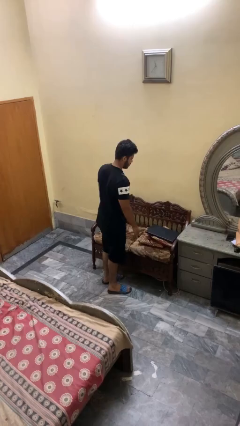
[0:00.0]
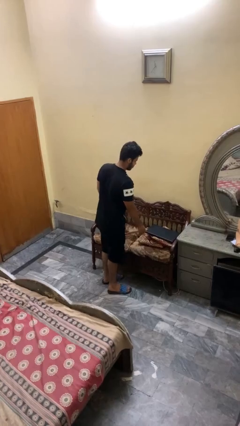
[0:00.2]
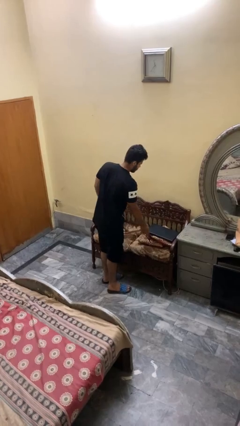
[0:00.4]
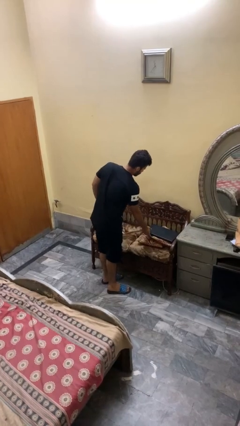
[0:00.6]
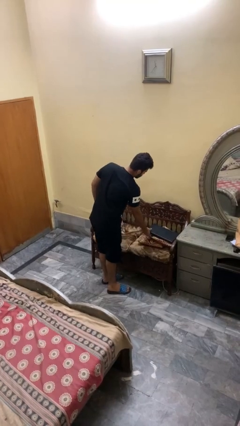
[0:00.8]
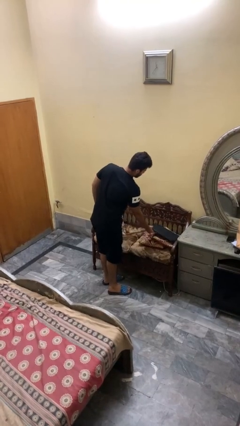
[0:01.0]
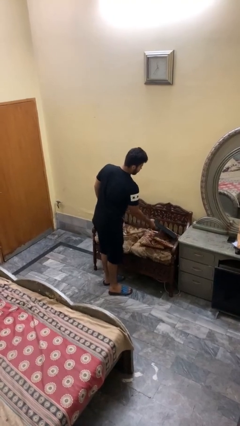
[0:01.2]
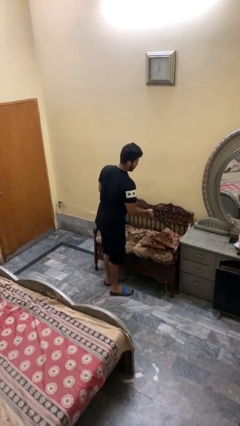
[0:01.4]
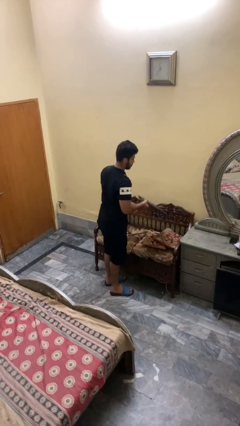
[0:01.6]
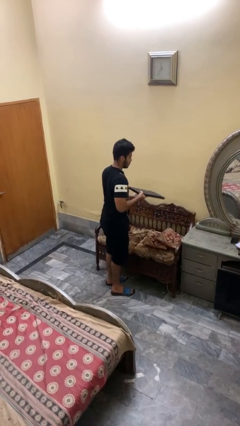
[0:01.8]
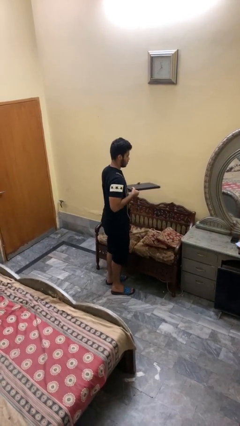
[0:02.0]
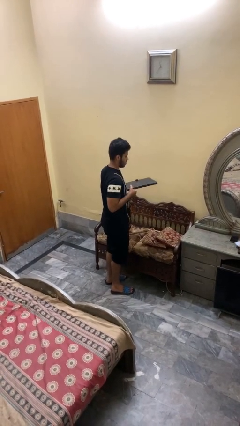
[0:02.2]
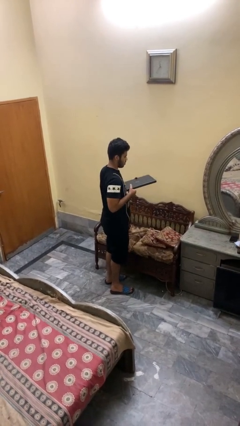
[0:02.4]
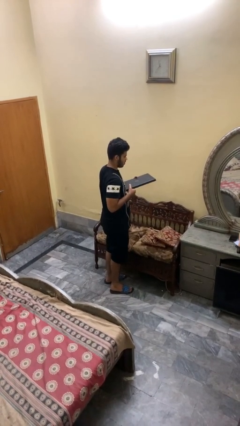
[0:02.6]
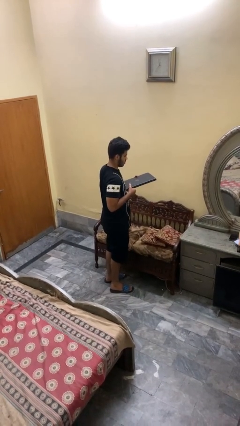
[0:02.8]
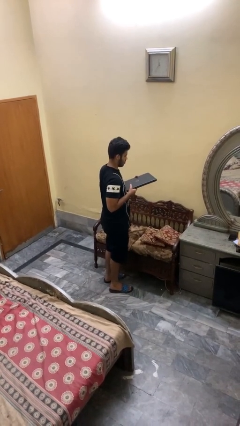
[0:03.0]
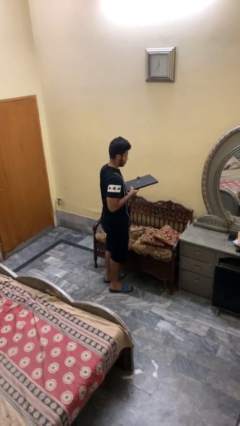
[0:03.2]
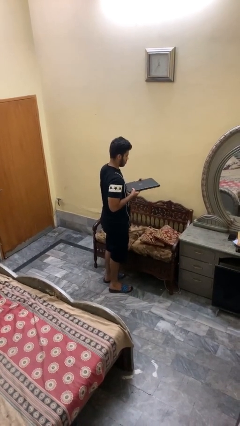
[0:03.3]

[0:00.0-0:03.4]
person picks up object from couch

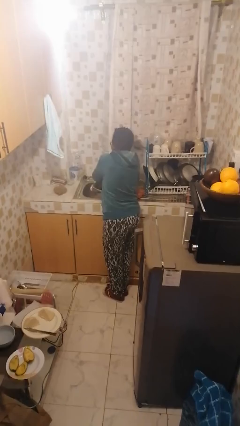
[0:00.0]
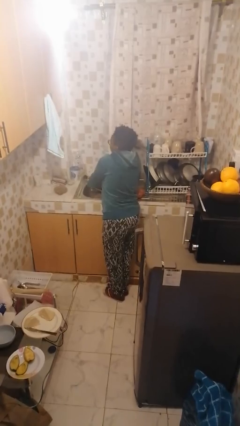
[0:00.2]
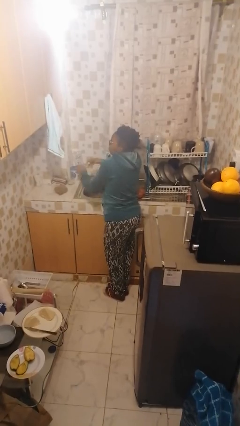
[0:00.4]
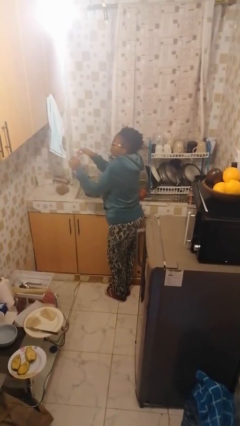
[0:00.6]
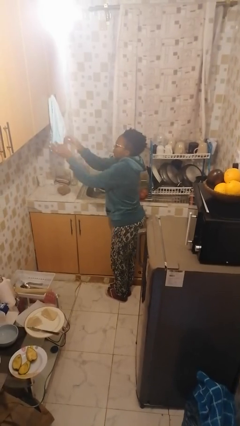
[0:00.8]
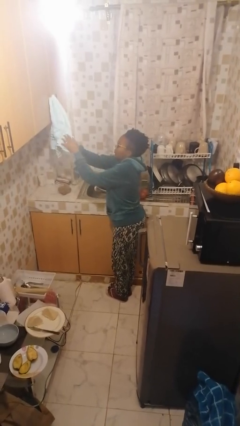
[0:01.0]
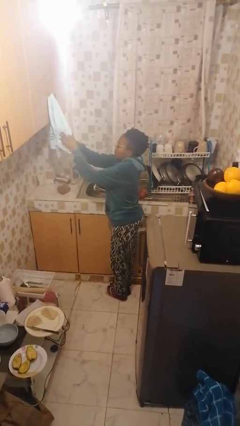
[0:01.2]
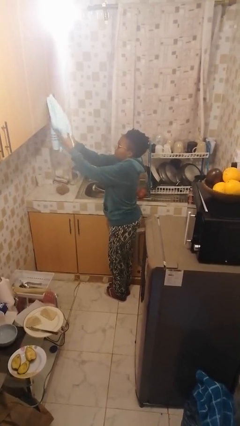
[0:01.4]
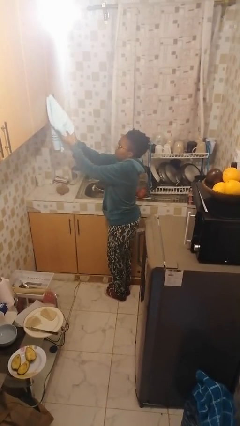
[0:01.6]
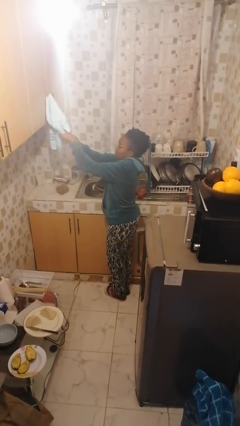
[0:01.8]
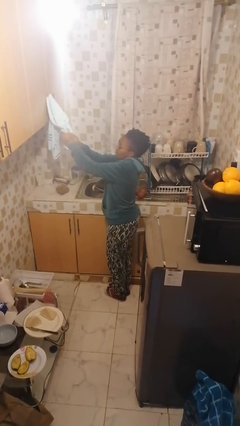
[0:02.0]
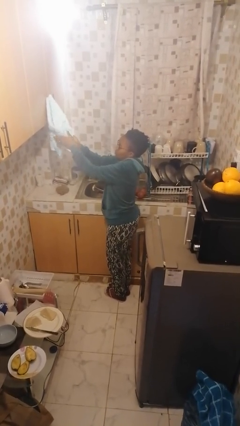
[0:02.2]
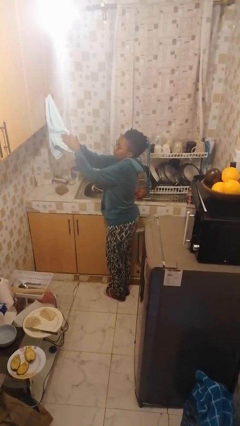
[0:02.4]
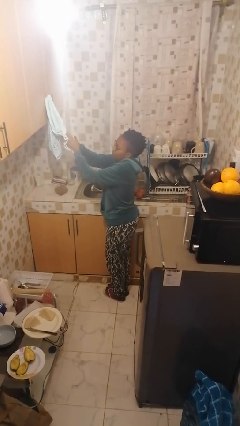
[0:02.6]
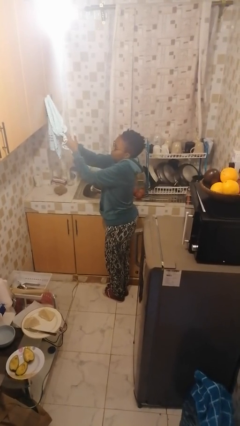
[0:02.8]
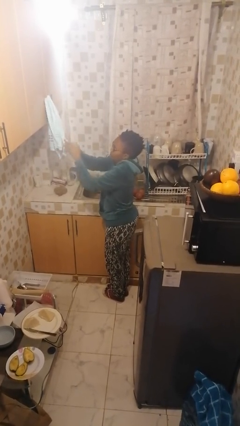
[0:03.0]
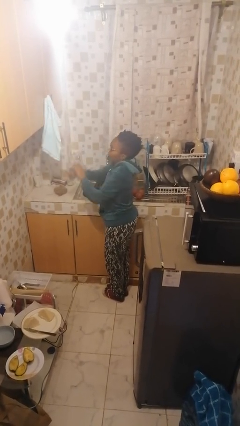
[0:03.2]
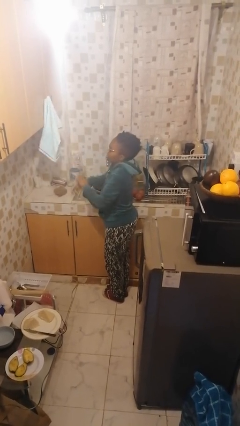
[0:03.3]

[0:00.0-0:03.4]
person dries hands with towel

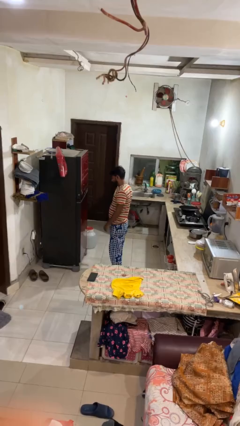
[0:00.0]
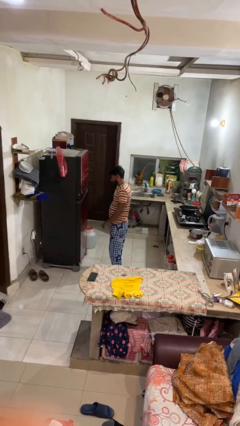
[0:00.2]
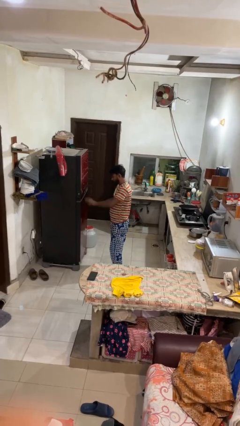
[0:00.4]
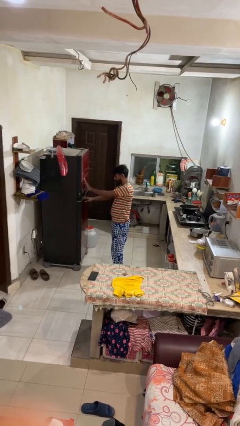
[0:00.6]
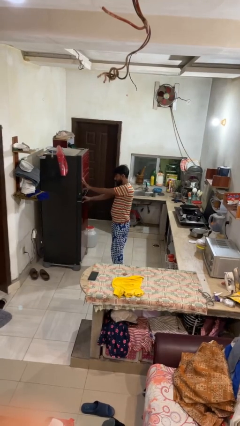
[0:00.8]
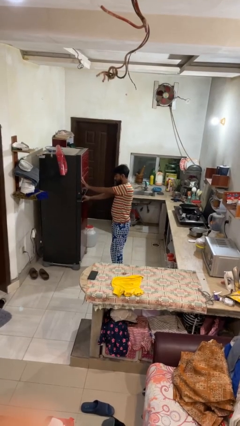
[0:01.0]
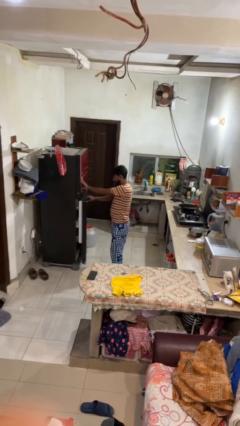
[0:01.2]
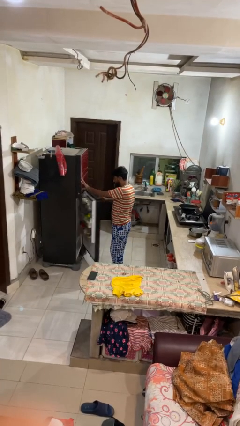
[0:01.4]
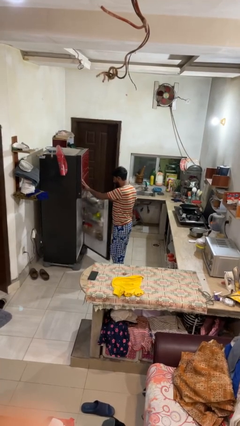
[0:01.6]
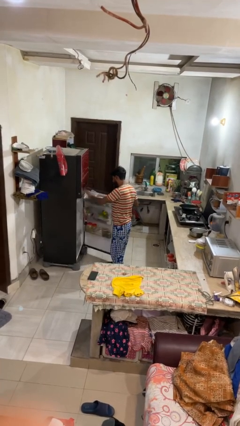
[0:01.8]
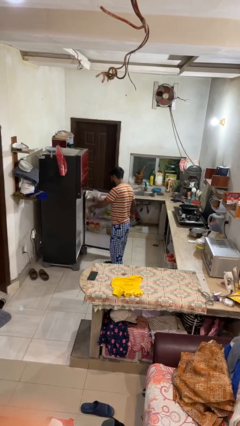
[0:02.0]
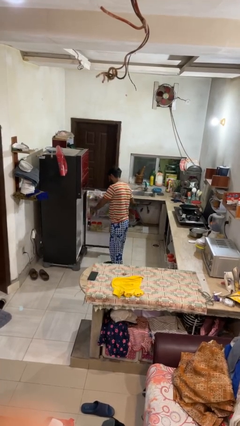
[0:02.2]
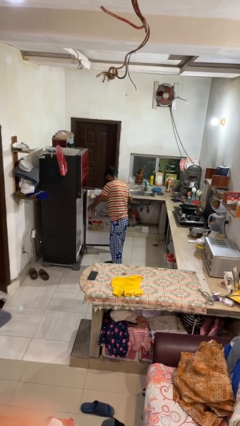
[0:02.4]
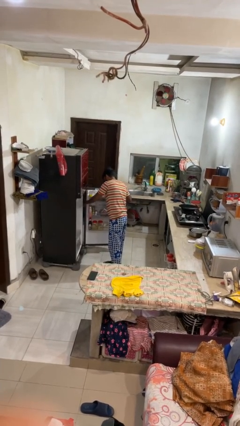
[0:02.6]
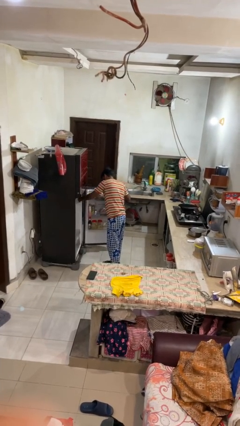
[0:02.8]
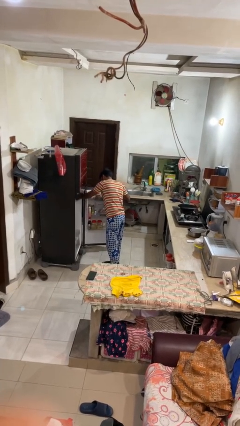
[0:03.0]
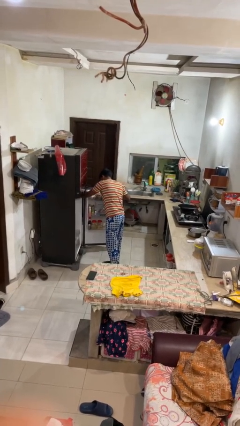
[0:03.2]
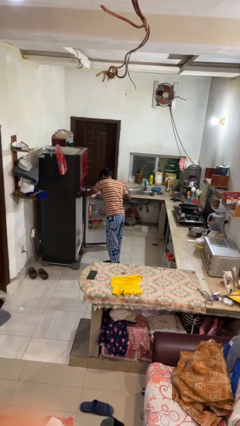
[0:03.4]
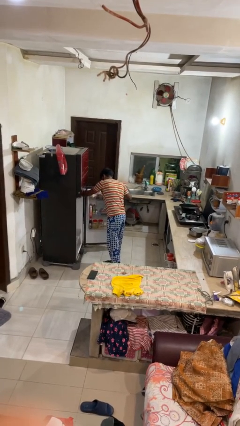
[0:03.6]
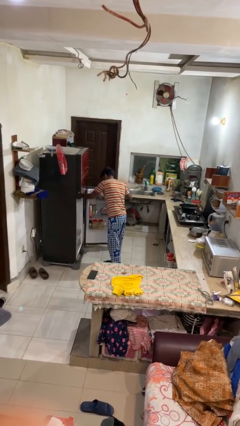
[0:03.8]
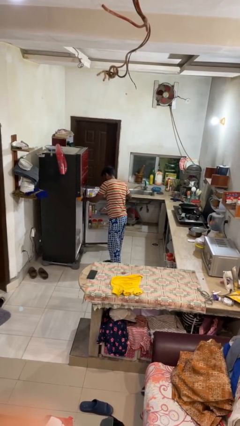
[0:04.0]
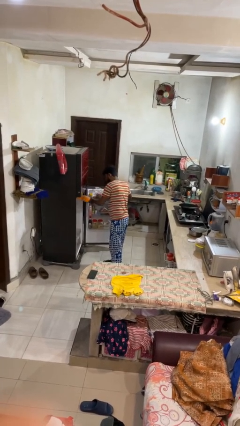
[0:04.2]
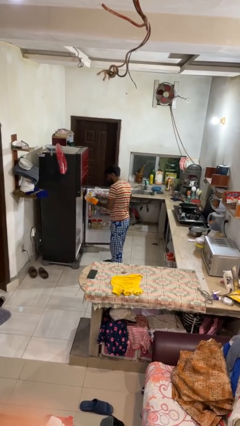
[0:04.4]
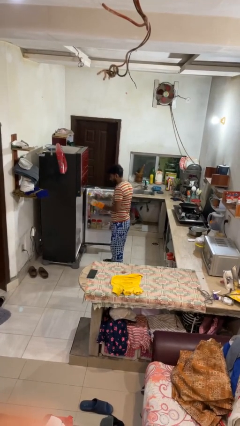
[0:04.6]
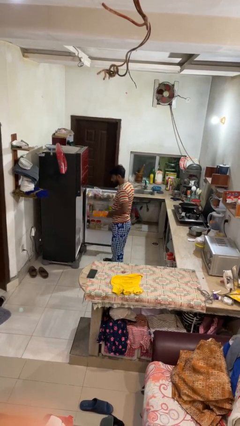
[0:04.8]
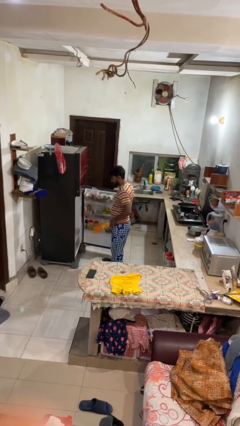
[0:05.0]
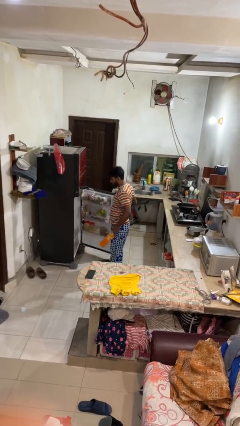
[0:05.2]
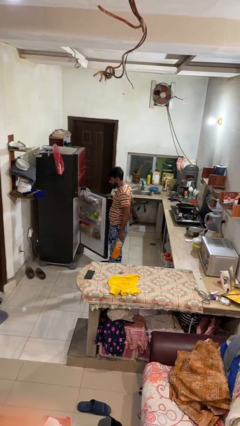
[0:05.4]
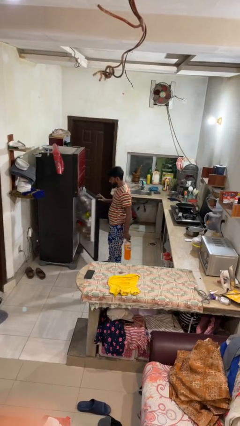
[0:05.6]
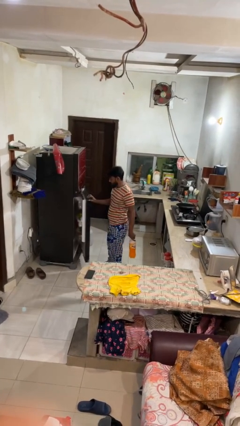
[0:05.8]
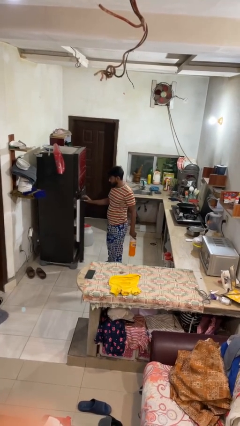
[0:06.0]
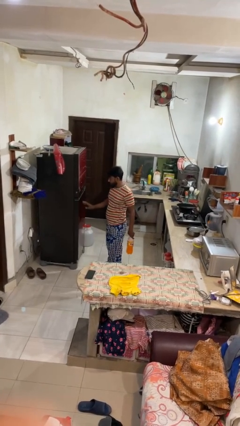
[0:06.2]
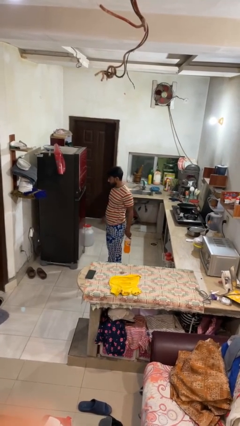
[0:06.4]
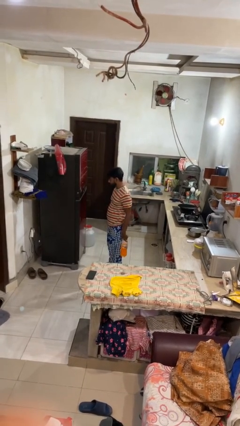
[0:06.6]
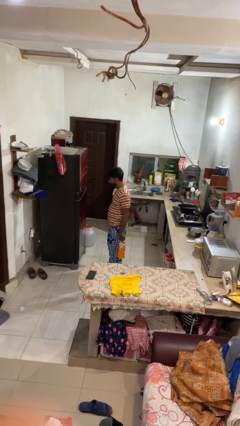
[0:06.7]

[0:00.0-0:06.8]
person takes object from refrigerator

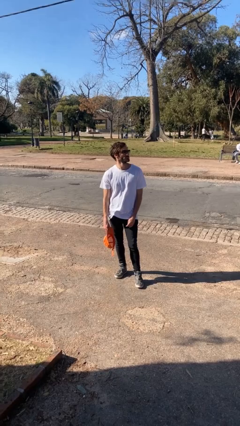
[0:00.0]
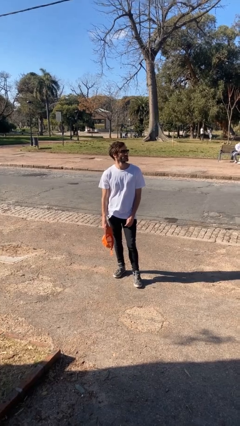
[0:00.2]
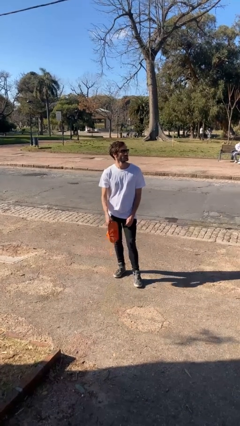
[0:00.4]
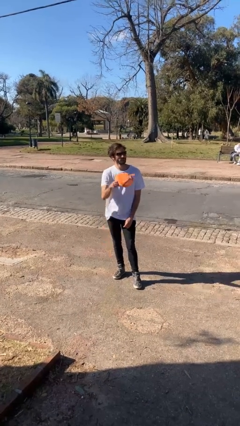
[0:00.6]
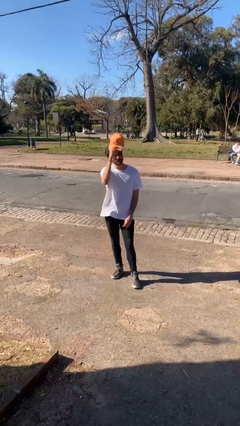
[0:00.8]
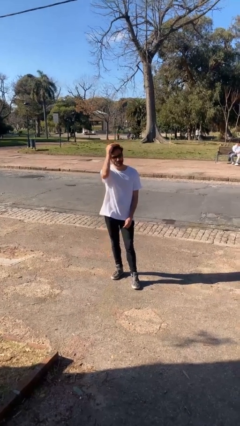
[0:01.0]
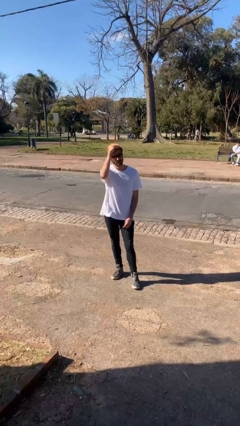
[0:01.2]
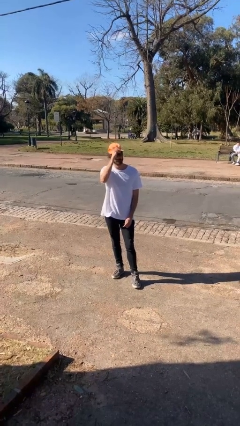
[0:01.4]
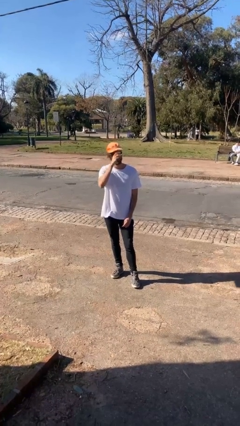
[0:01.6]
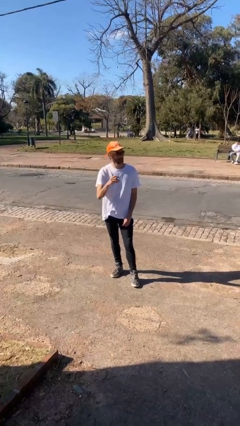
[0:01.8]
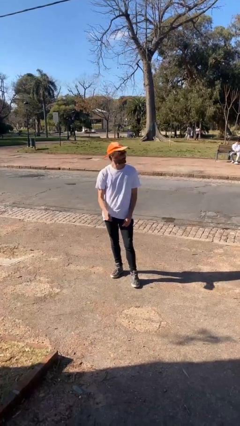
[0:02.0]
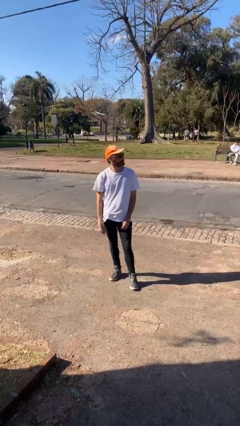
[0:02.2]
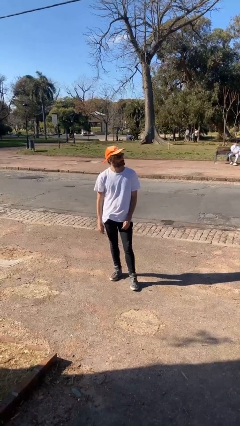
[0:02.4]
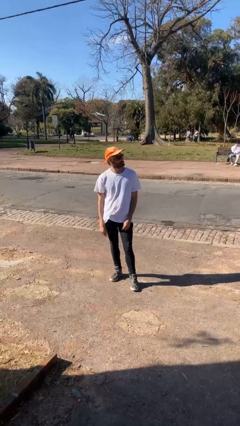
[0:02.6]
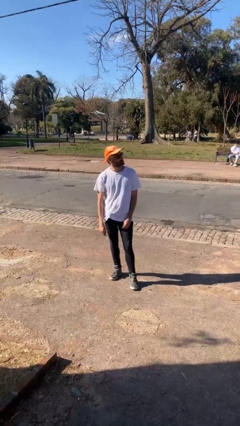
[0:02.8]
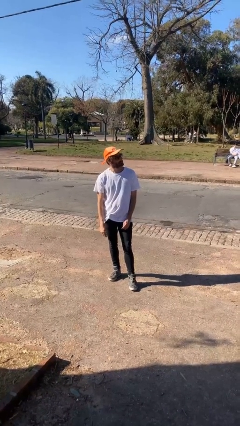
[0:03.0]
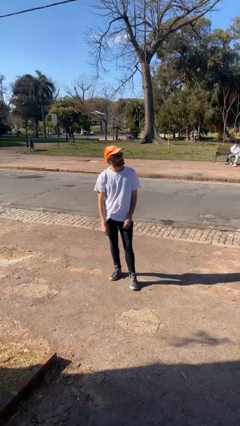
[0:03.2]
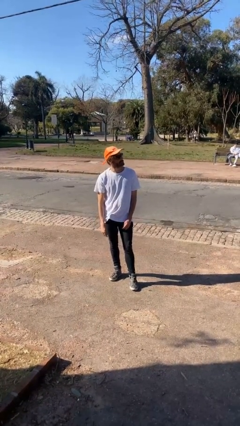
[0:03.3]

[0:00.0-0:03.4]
person puts on hat

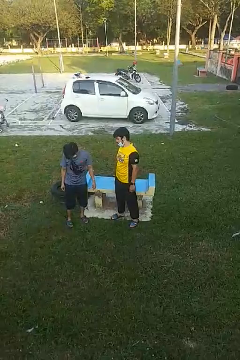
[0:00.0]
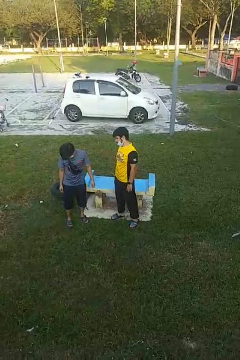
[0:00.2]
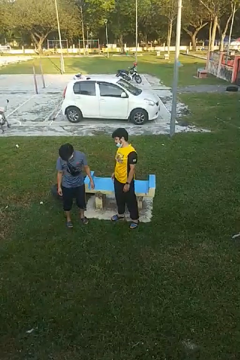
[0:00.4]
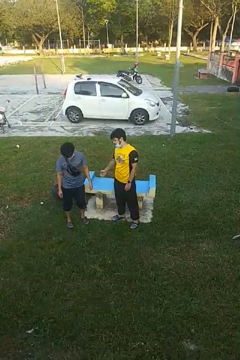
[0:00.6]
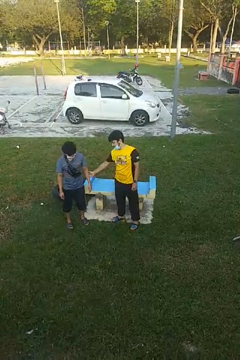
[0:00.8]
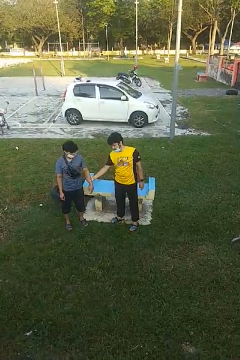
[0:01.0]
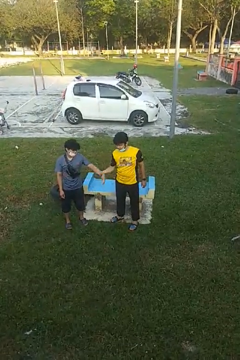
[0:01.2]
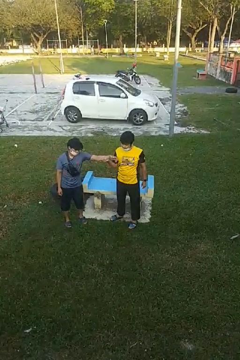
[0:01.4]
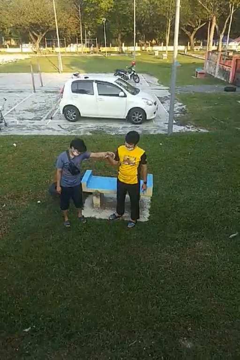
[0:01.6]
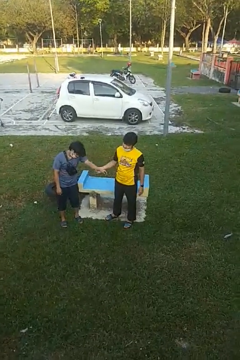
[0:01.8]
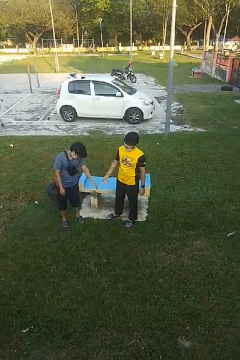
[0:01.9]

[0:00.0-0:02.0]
person grabs person by forearm
